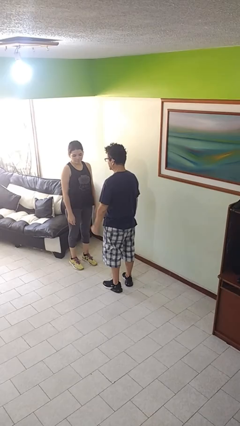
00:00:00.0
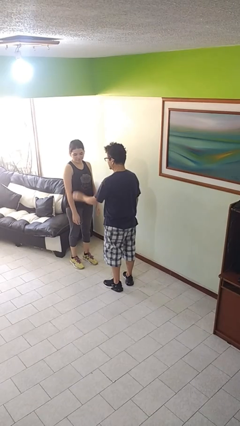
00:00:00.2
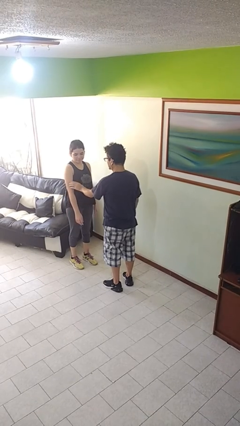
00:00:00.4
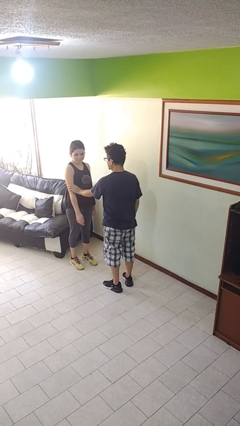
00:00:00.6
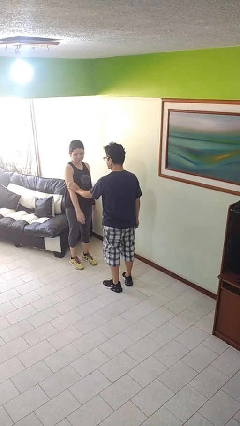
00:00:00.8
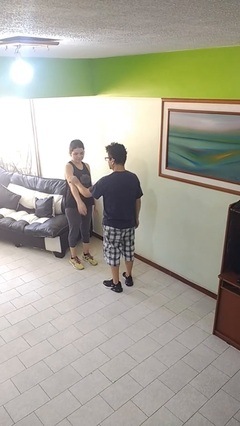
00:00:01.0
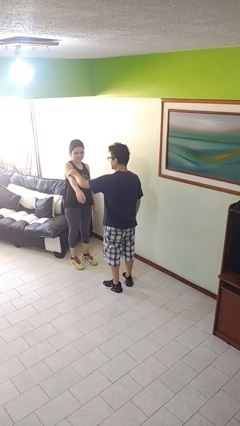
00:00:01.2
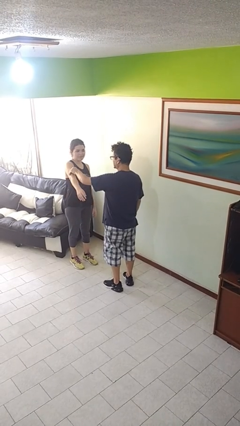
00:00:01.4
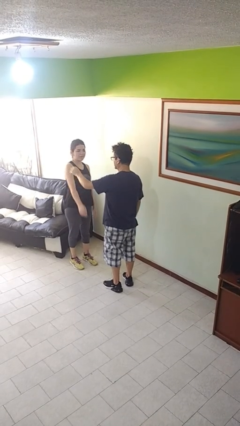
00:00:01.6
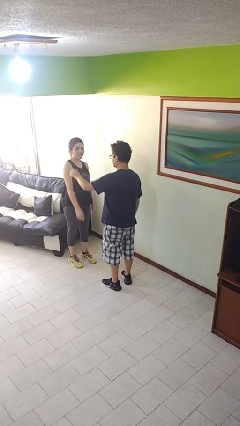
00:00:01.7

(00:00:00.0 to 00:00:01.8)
person grabs person by bicep

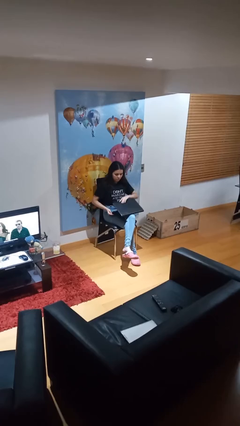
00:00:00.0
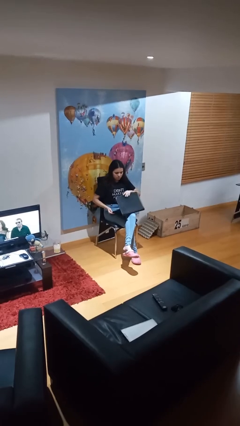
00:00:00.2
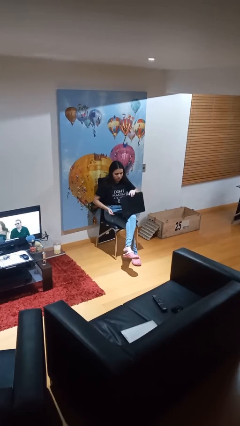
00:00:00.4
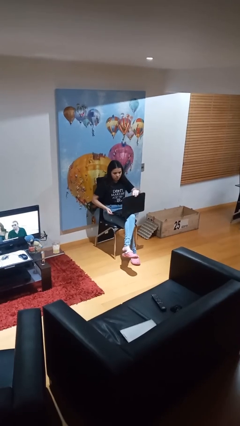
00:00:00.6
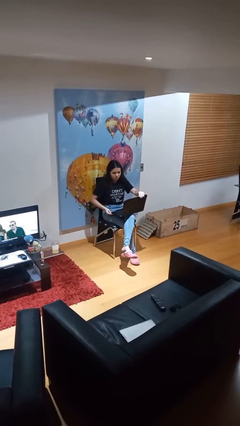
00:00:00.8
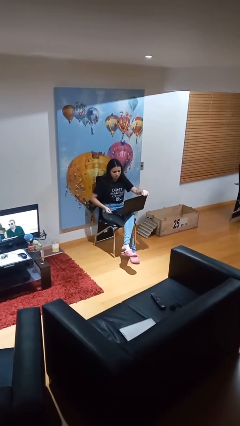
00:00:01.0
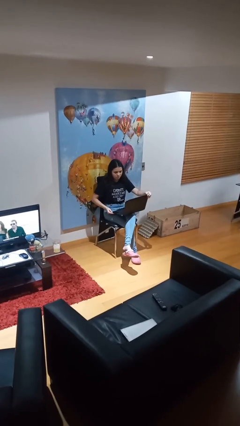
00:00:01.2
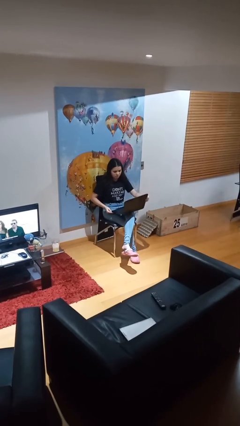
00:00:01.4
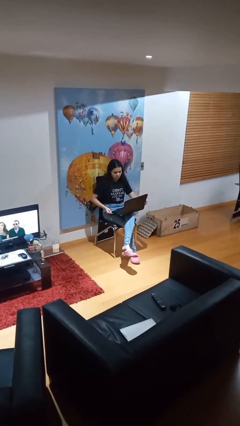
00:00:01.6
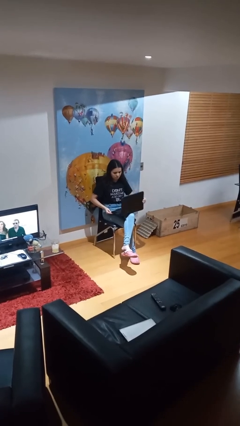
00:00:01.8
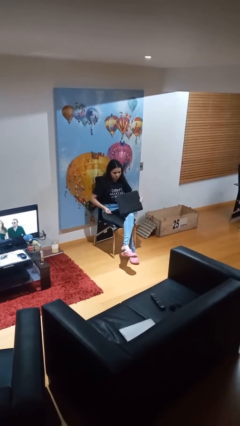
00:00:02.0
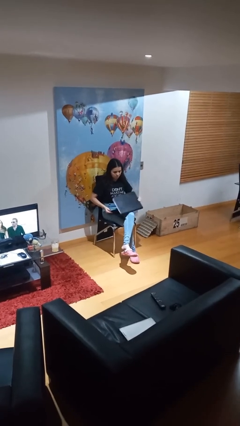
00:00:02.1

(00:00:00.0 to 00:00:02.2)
person interacts with laptop

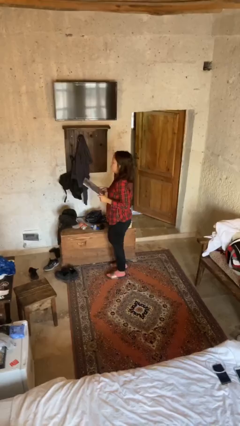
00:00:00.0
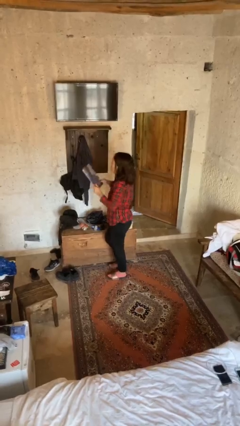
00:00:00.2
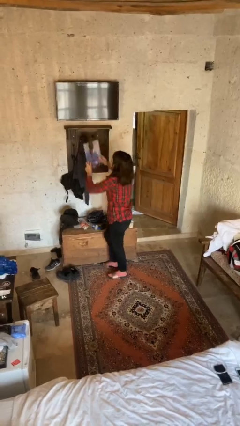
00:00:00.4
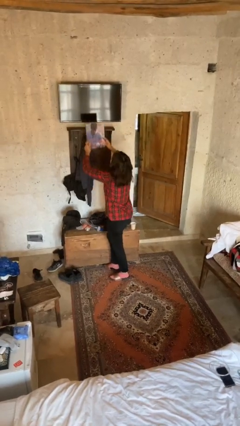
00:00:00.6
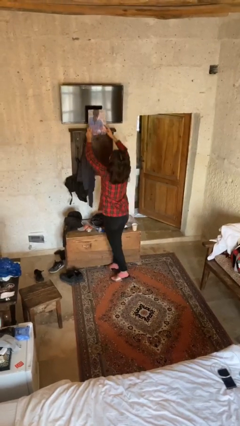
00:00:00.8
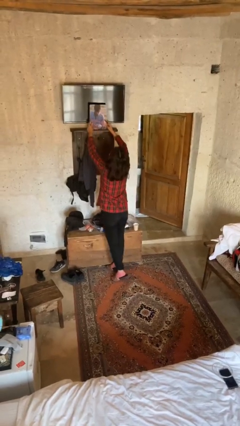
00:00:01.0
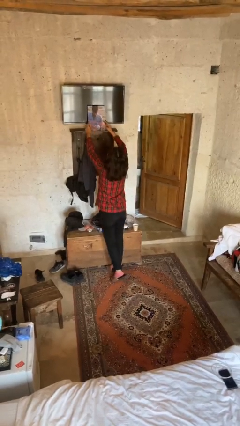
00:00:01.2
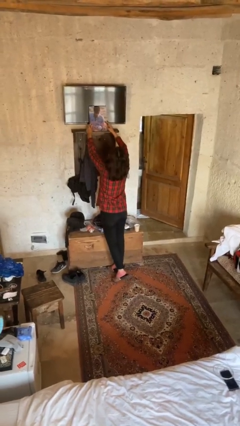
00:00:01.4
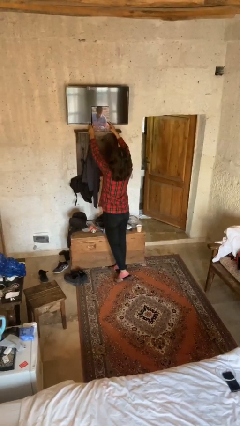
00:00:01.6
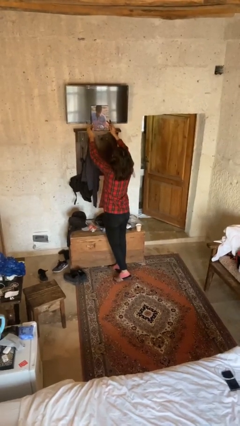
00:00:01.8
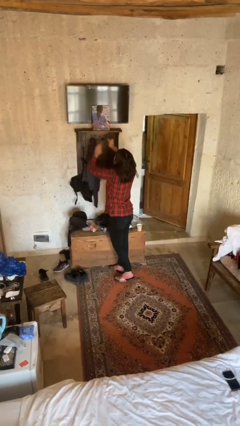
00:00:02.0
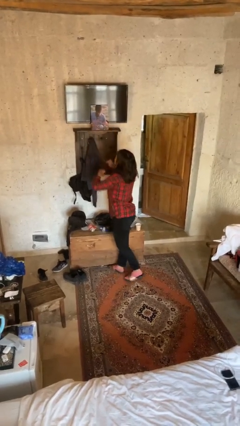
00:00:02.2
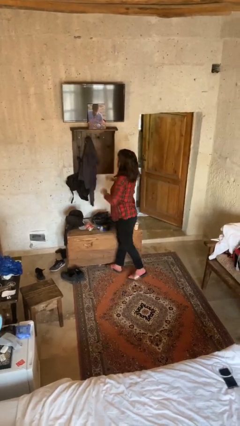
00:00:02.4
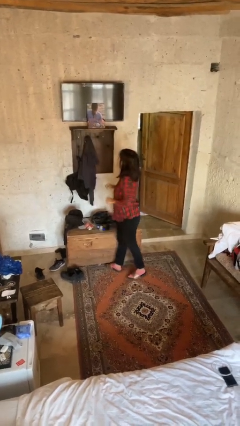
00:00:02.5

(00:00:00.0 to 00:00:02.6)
person puts down object on shelf

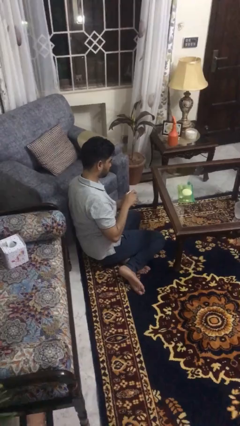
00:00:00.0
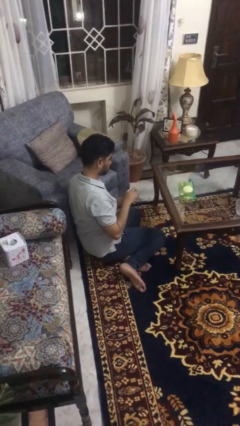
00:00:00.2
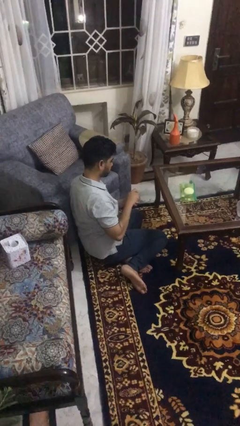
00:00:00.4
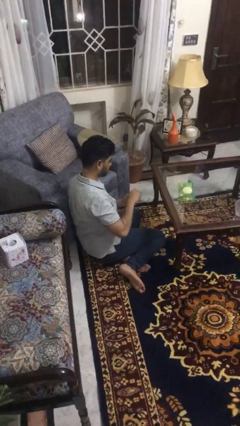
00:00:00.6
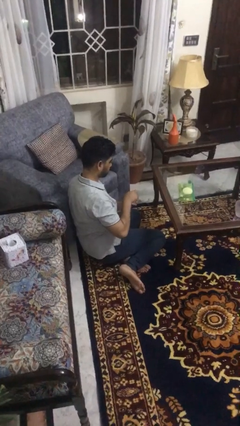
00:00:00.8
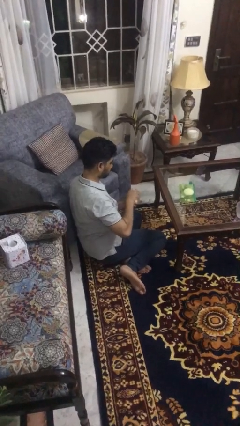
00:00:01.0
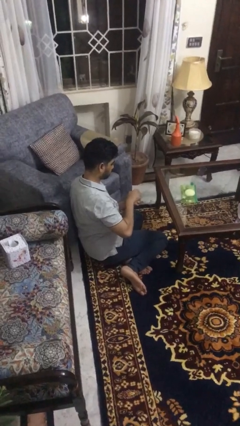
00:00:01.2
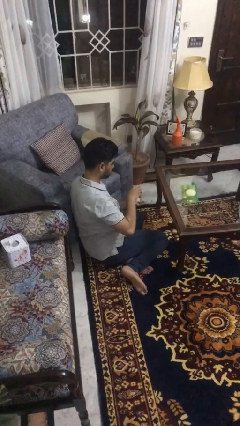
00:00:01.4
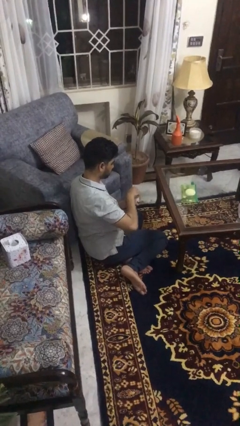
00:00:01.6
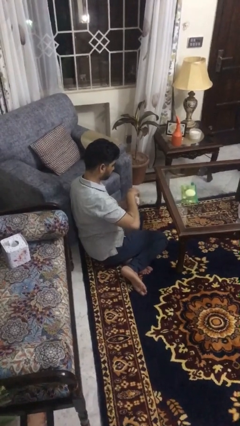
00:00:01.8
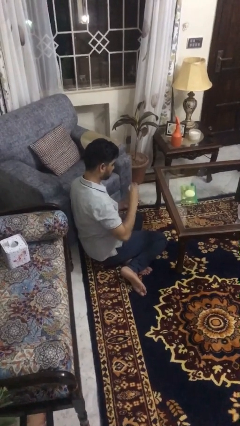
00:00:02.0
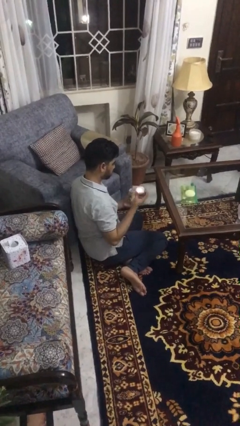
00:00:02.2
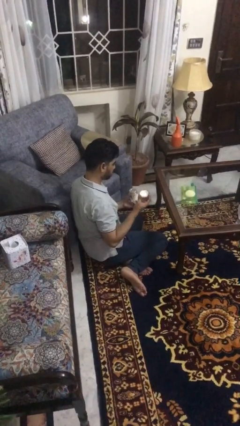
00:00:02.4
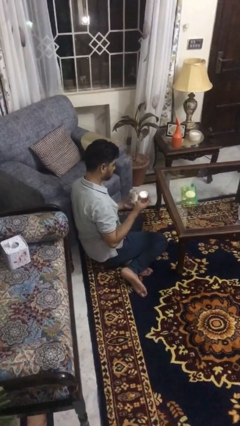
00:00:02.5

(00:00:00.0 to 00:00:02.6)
person opens jar

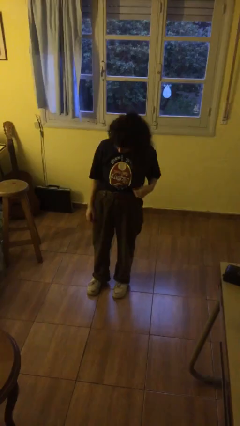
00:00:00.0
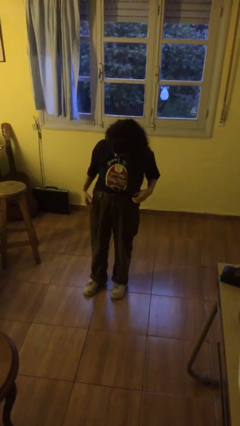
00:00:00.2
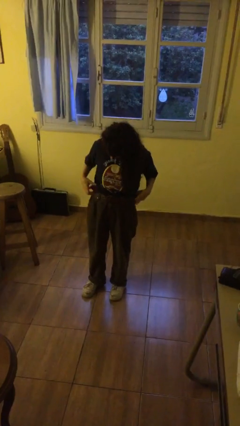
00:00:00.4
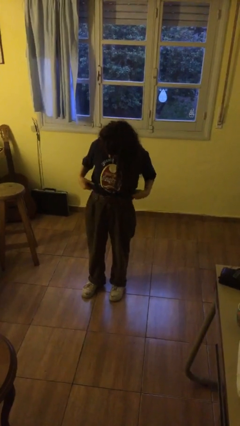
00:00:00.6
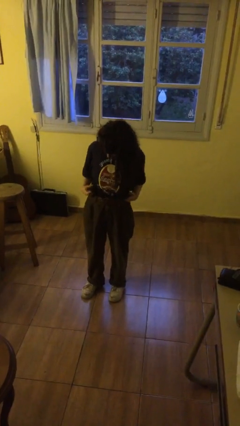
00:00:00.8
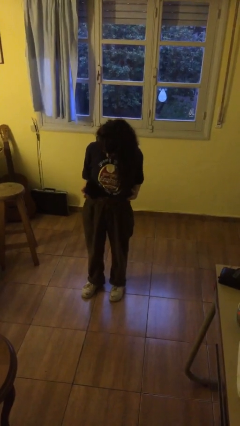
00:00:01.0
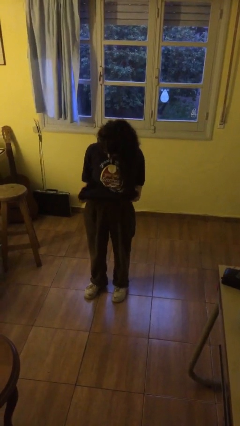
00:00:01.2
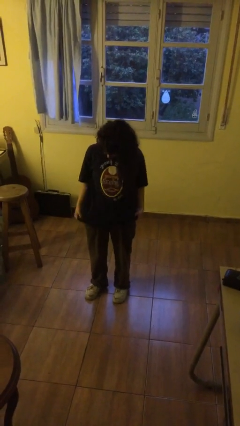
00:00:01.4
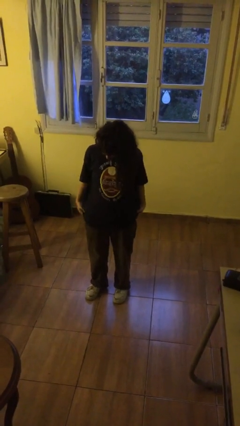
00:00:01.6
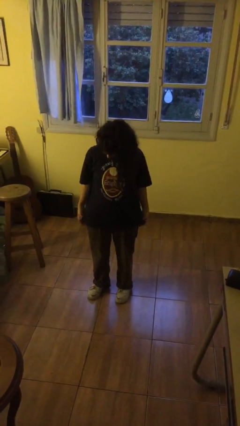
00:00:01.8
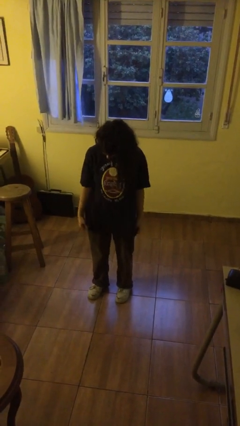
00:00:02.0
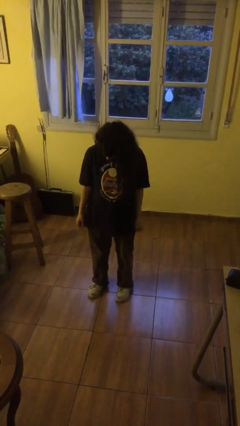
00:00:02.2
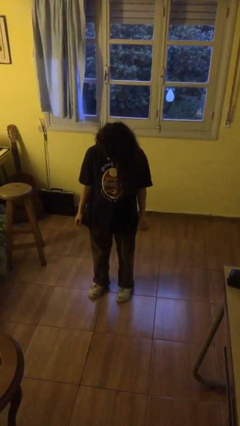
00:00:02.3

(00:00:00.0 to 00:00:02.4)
person untucks shirt

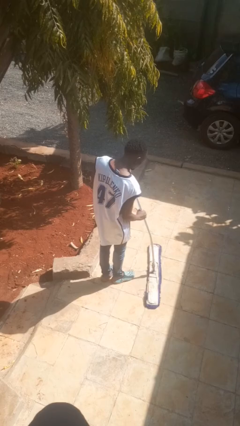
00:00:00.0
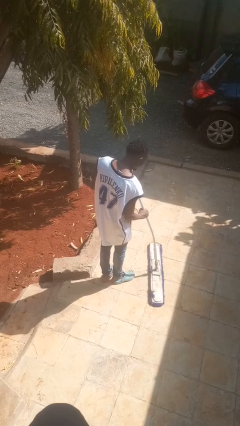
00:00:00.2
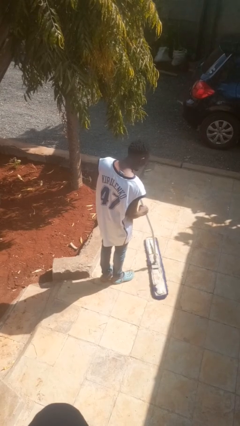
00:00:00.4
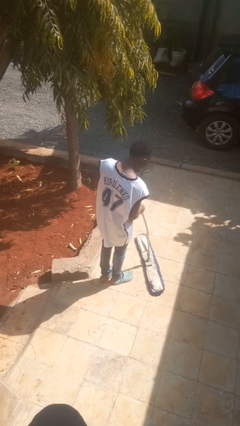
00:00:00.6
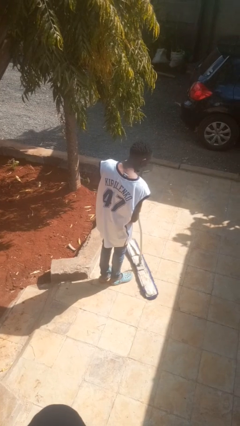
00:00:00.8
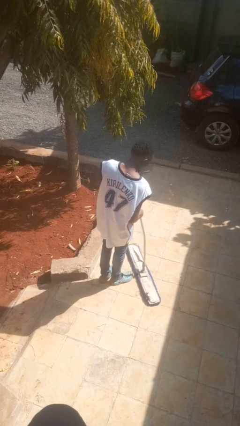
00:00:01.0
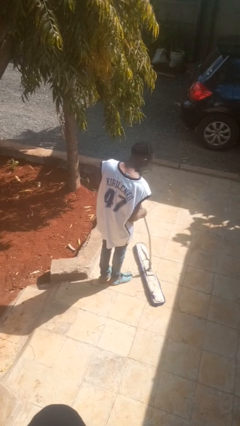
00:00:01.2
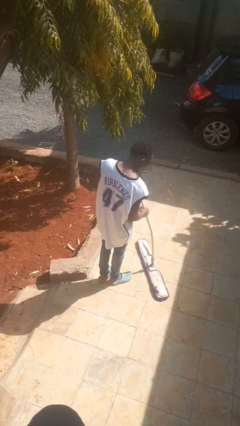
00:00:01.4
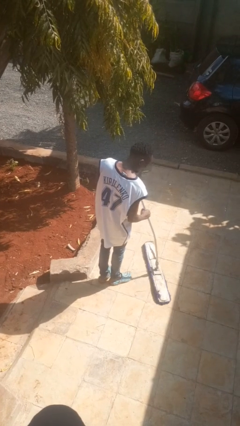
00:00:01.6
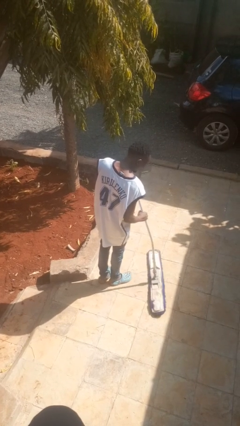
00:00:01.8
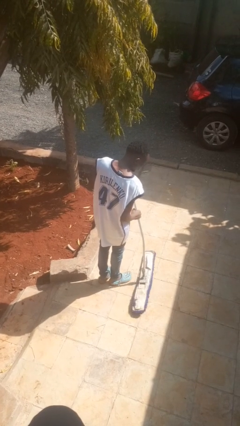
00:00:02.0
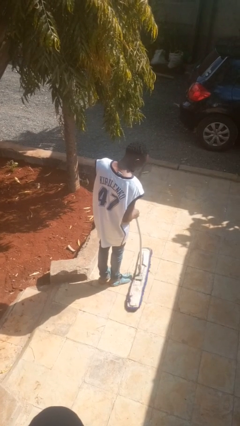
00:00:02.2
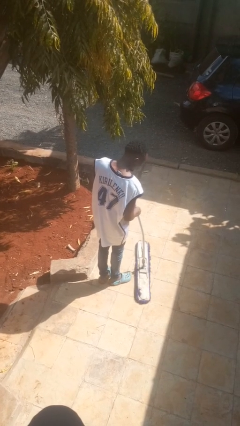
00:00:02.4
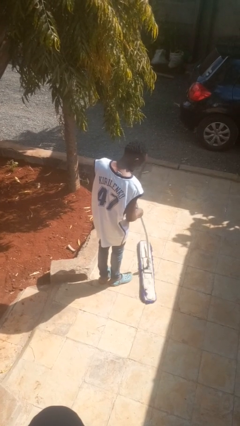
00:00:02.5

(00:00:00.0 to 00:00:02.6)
person mops

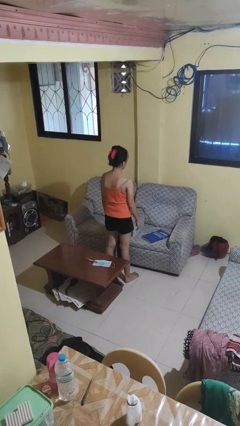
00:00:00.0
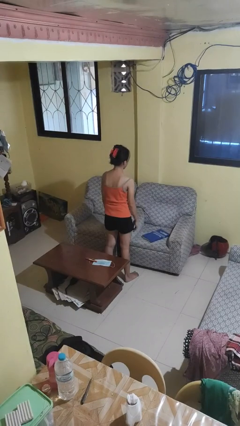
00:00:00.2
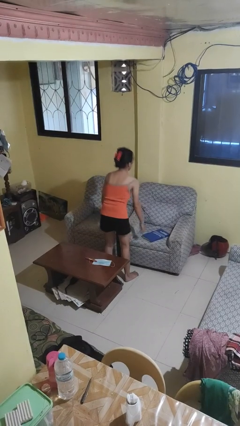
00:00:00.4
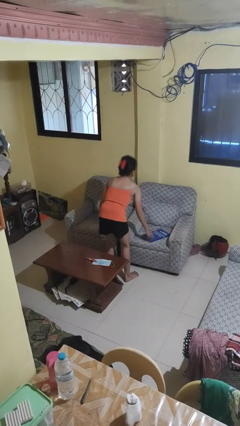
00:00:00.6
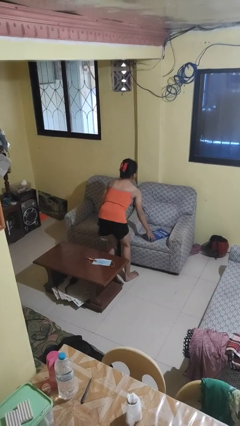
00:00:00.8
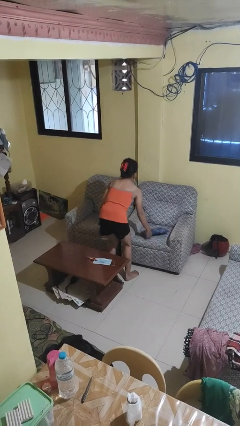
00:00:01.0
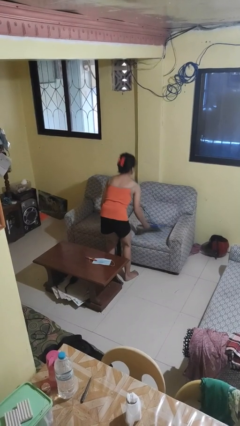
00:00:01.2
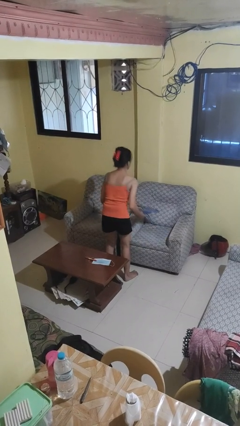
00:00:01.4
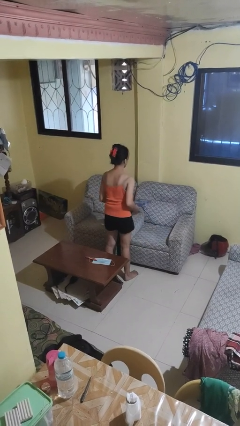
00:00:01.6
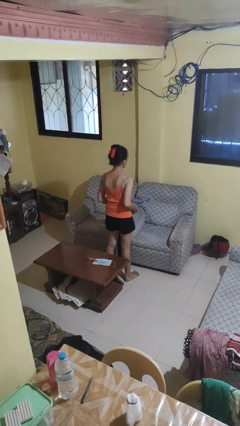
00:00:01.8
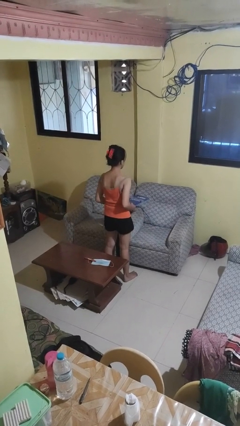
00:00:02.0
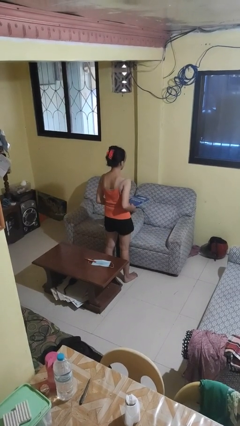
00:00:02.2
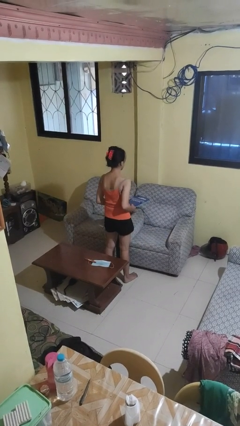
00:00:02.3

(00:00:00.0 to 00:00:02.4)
person picks up object from couch

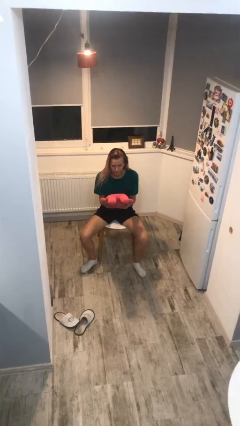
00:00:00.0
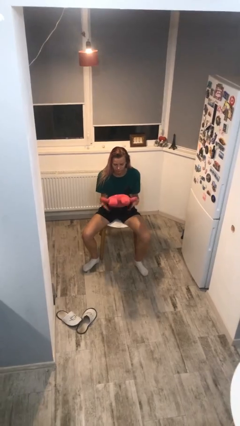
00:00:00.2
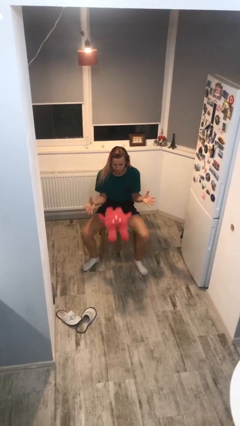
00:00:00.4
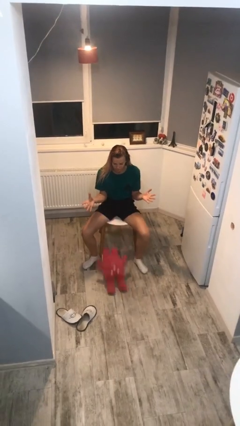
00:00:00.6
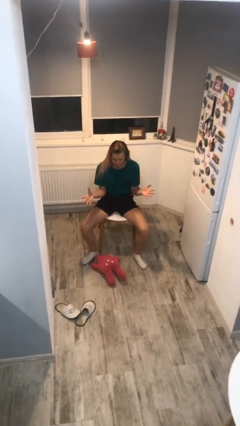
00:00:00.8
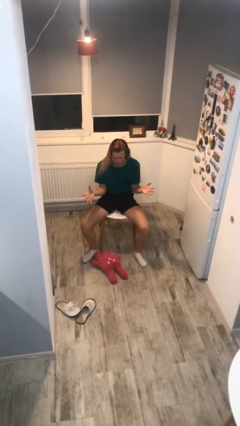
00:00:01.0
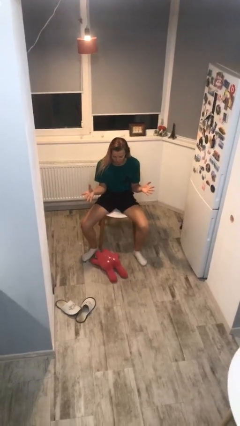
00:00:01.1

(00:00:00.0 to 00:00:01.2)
person drops object
